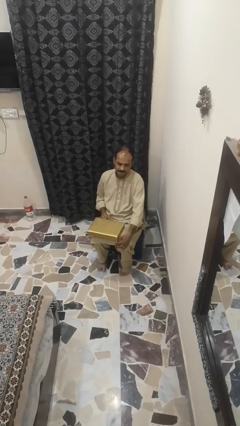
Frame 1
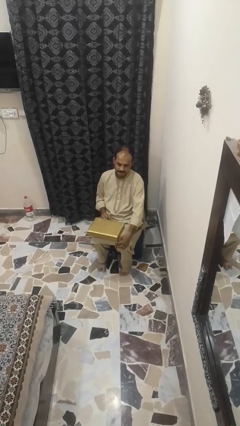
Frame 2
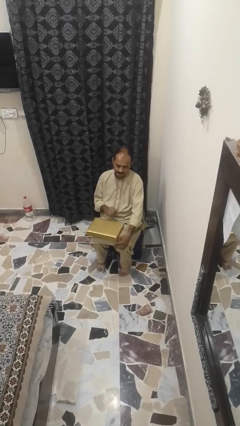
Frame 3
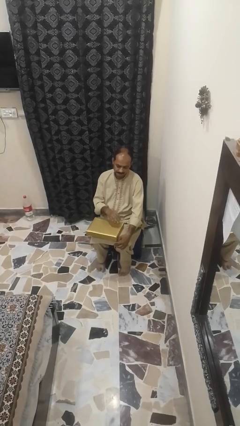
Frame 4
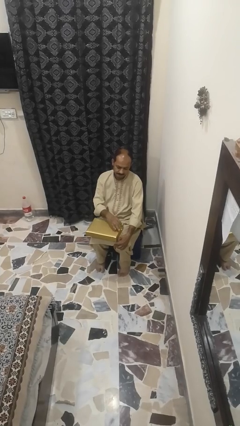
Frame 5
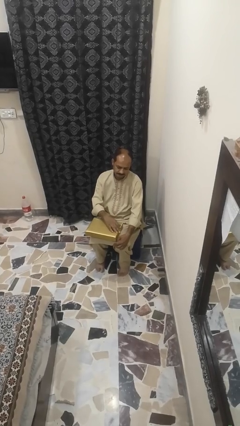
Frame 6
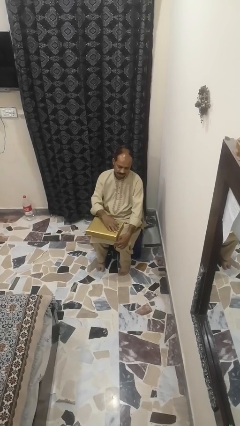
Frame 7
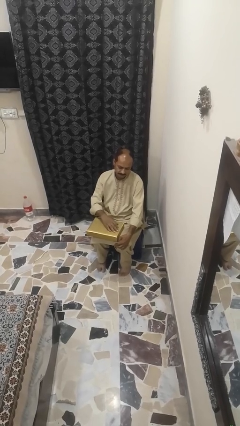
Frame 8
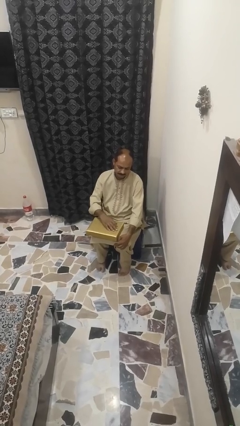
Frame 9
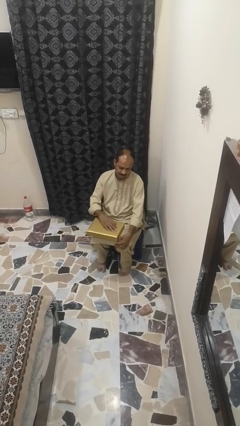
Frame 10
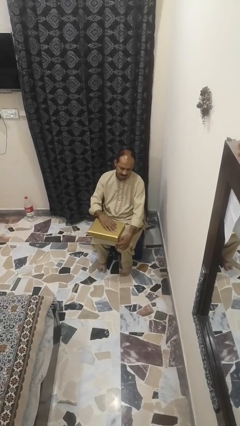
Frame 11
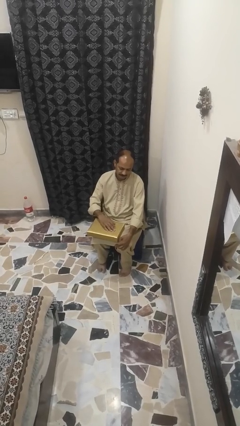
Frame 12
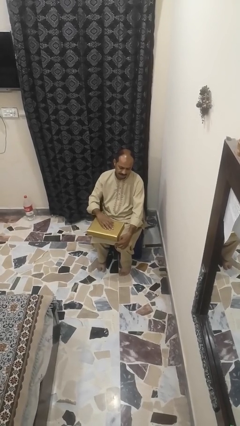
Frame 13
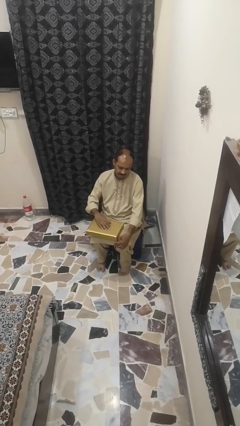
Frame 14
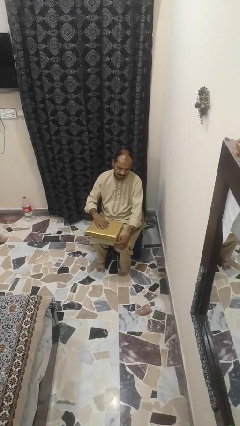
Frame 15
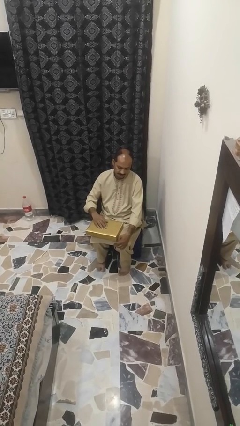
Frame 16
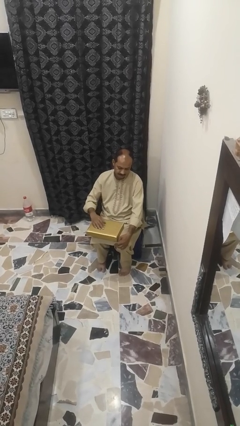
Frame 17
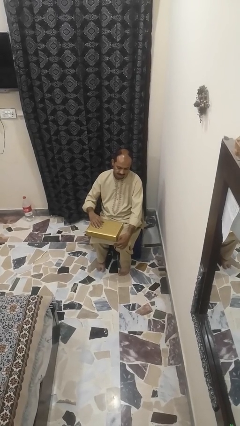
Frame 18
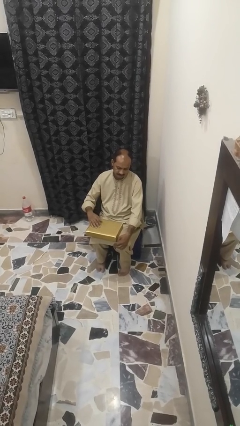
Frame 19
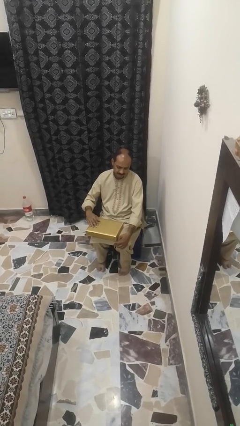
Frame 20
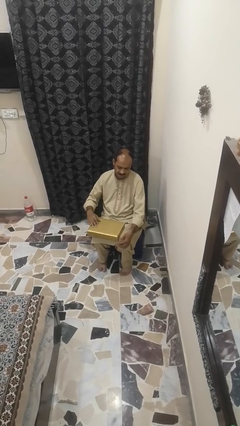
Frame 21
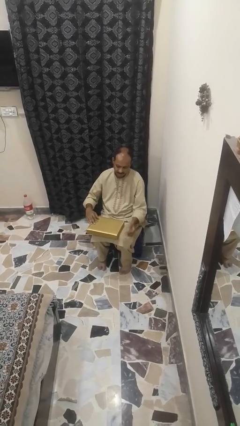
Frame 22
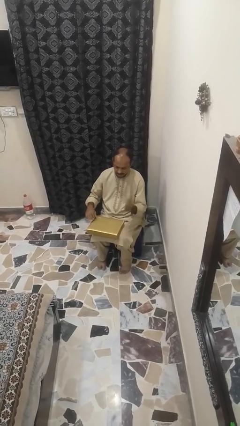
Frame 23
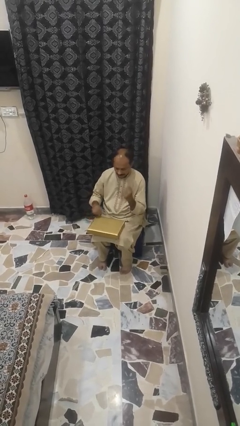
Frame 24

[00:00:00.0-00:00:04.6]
person waves hand over object

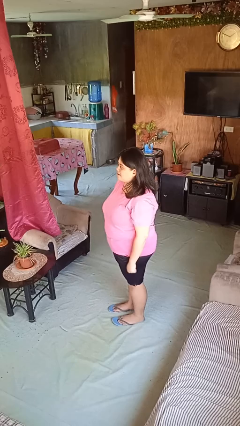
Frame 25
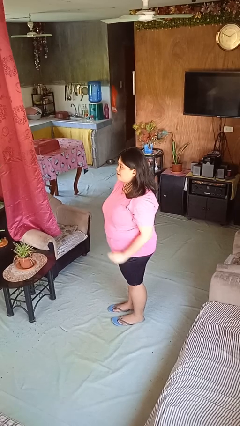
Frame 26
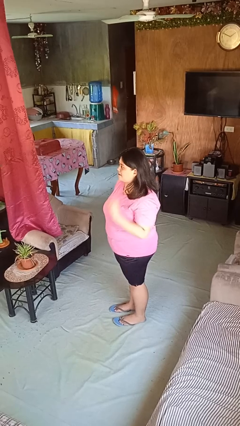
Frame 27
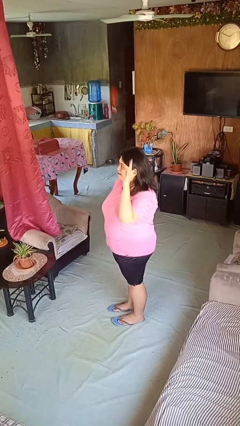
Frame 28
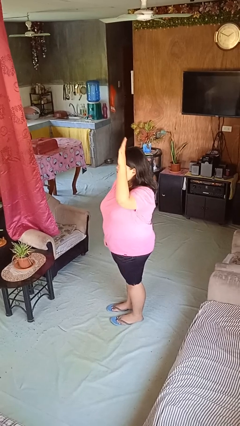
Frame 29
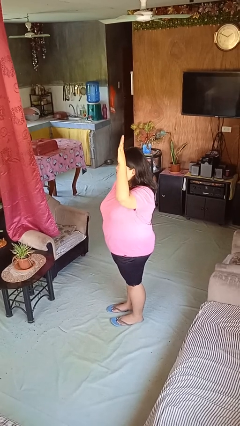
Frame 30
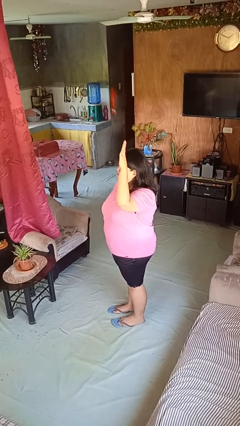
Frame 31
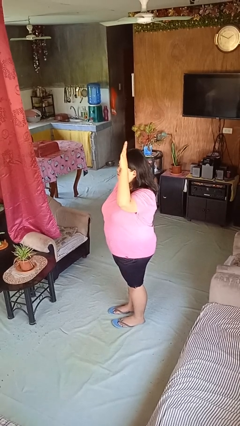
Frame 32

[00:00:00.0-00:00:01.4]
person gestures raise hand

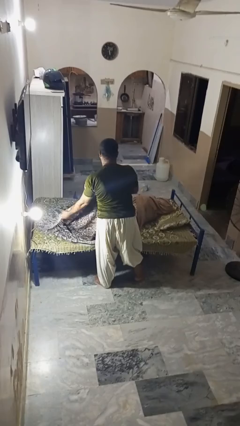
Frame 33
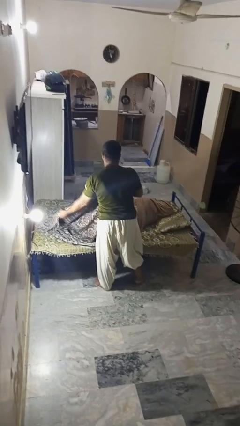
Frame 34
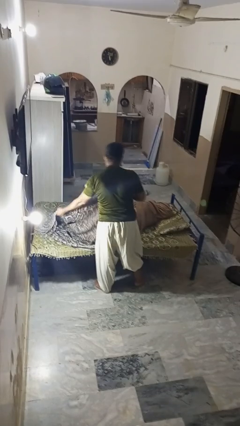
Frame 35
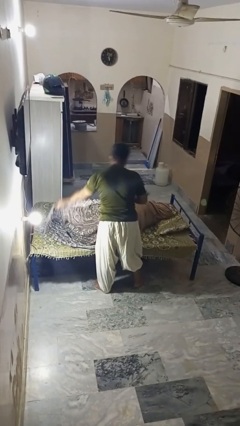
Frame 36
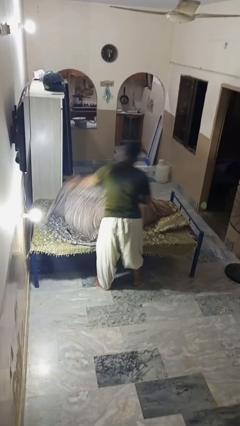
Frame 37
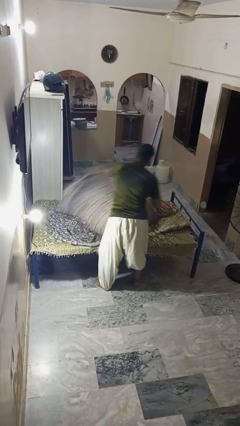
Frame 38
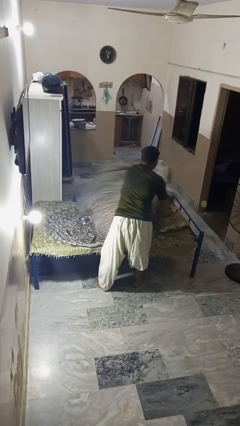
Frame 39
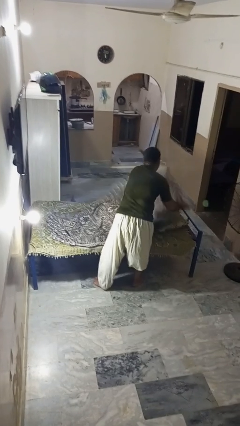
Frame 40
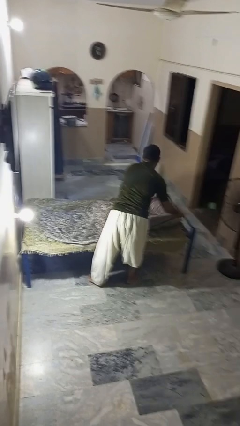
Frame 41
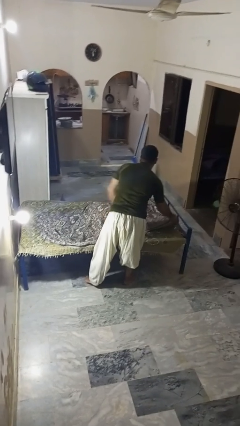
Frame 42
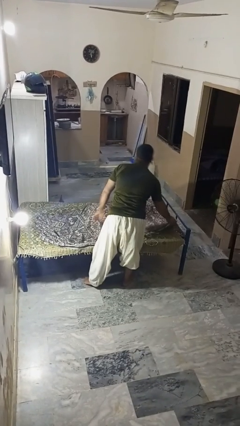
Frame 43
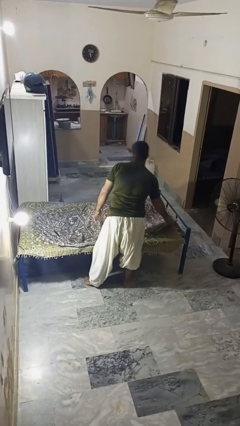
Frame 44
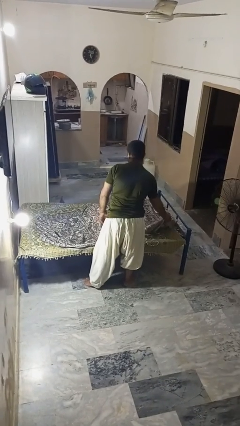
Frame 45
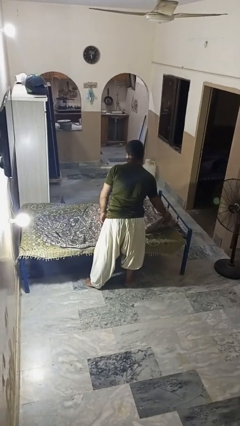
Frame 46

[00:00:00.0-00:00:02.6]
person covers friend with blanket

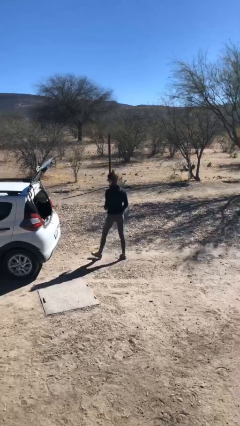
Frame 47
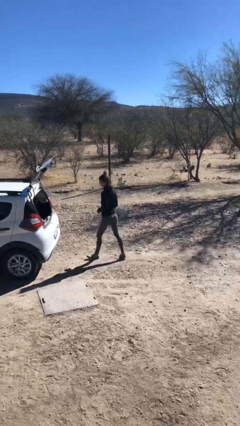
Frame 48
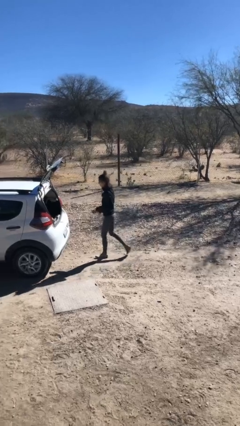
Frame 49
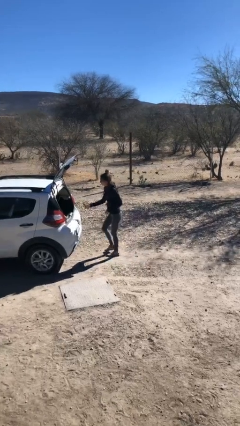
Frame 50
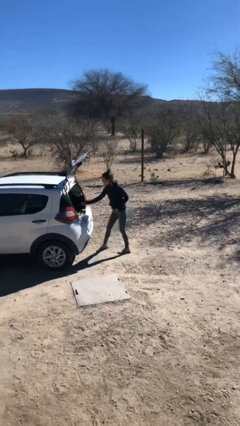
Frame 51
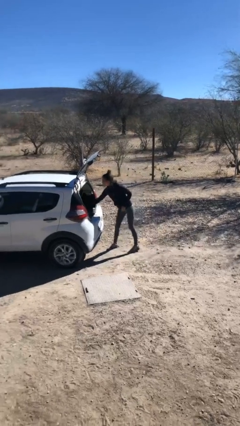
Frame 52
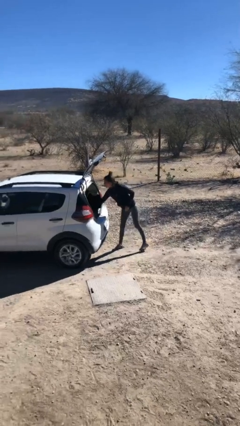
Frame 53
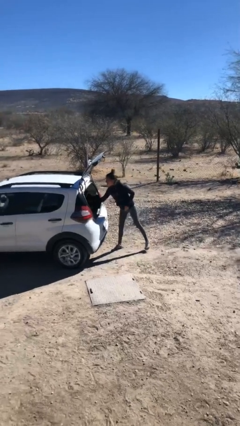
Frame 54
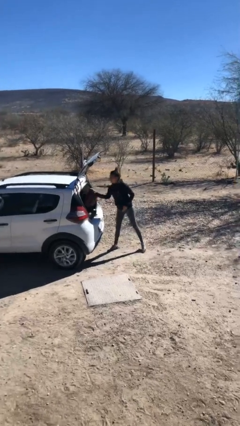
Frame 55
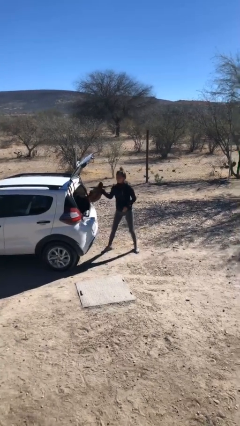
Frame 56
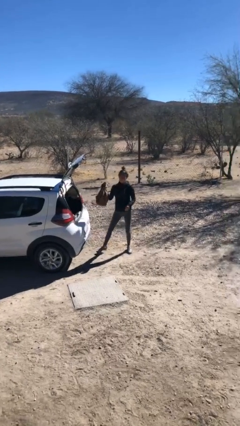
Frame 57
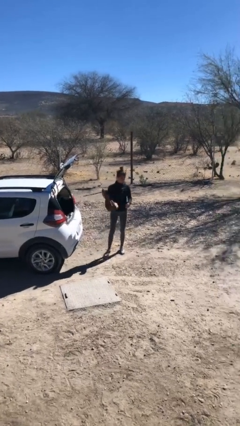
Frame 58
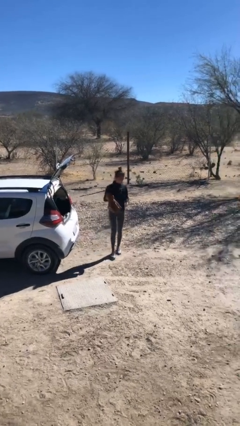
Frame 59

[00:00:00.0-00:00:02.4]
person unloads car

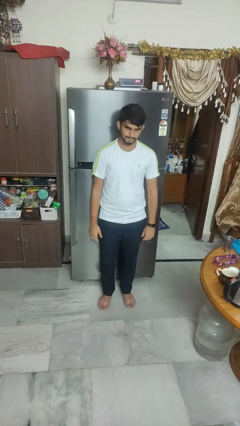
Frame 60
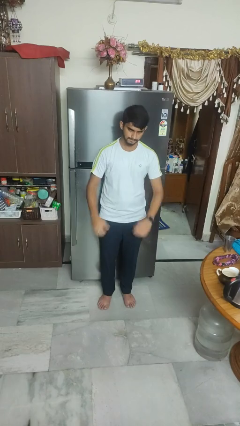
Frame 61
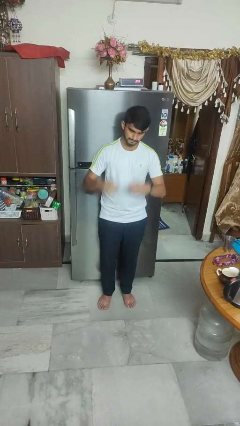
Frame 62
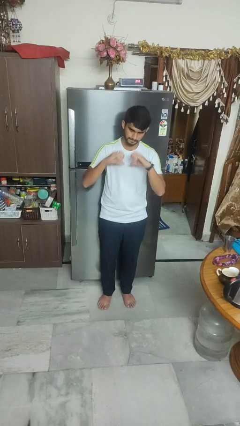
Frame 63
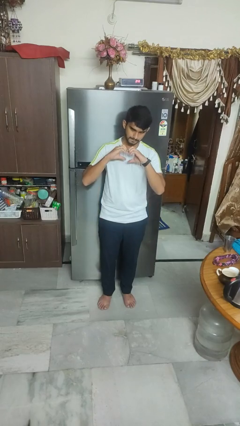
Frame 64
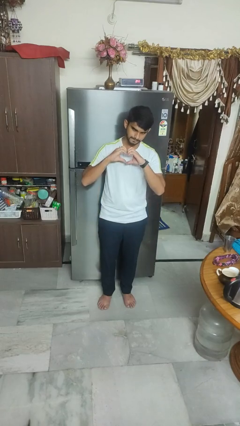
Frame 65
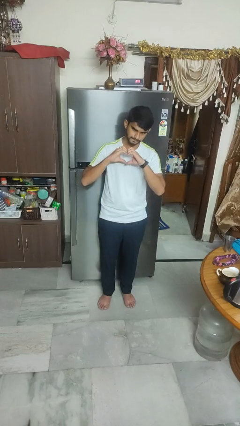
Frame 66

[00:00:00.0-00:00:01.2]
person gestures heart

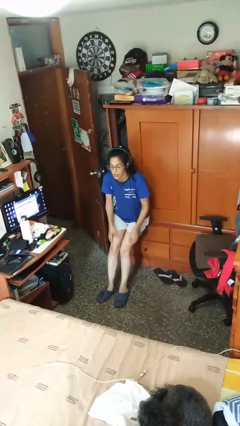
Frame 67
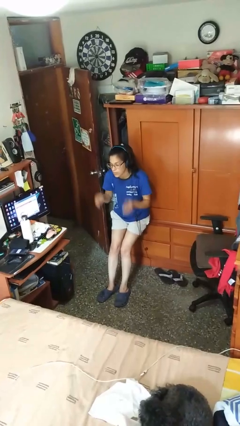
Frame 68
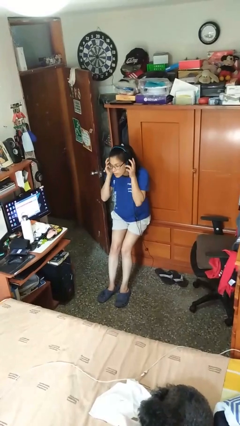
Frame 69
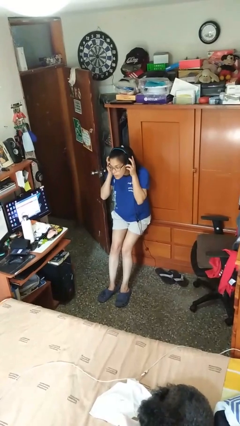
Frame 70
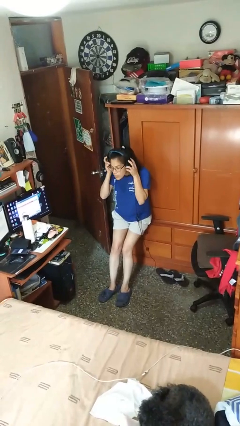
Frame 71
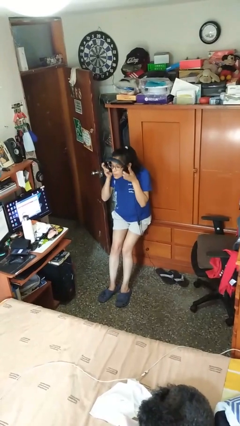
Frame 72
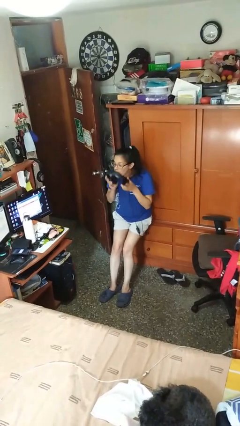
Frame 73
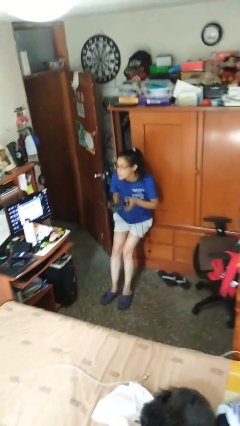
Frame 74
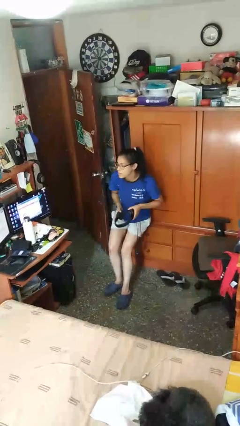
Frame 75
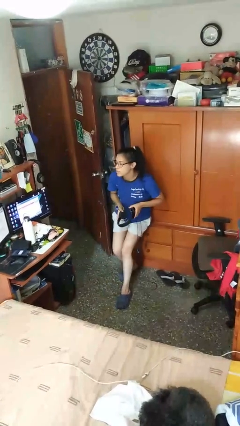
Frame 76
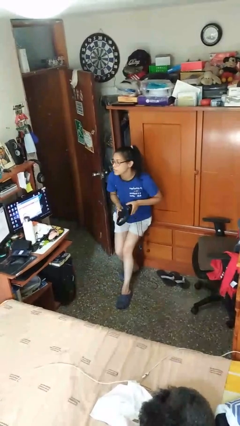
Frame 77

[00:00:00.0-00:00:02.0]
person puts on headphones

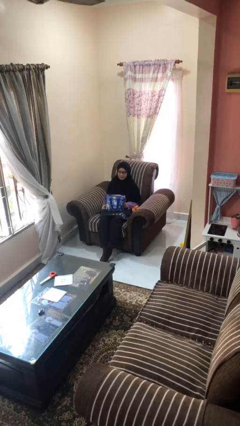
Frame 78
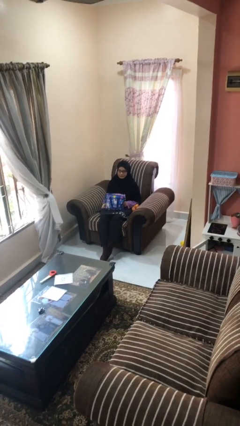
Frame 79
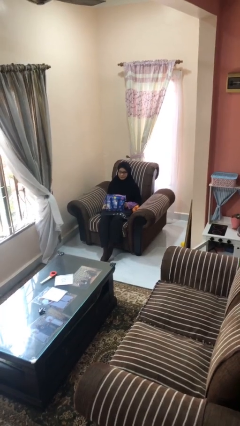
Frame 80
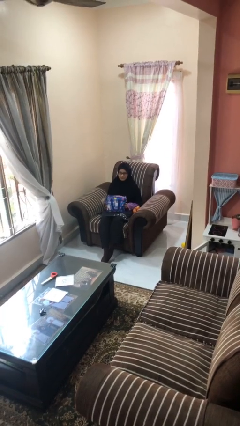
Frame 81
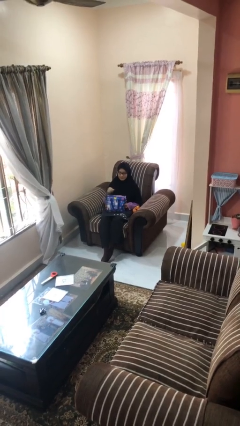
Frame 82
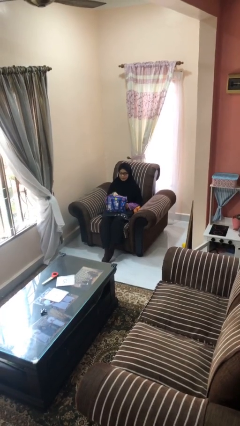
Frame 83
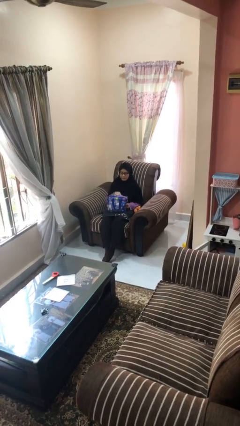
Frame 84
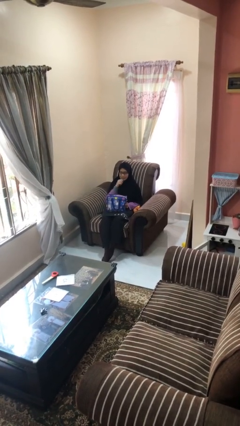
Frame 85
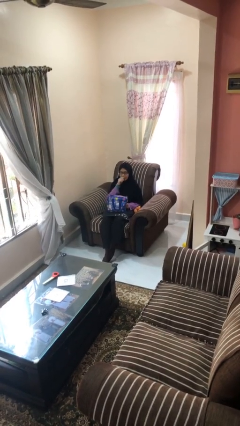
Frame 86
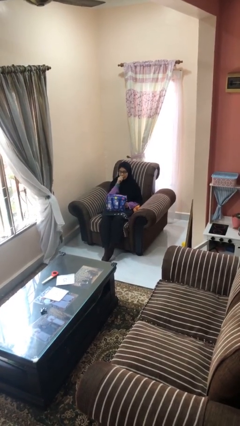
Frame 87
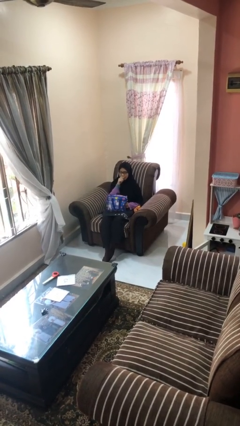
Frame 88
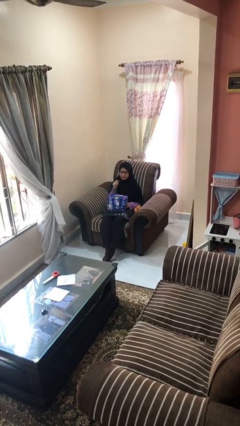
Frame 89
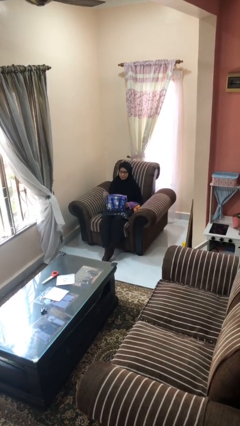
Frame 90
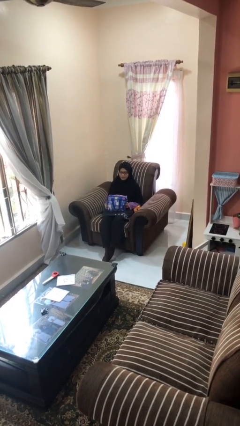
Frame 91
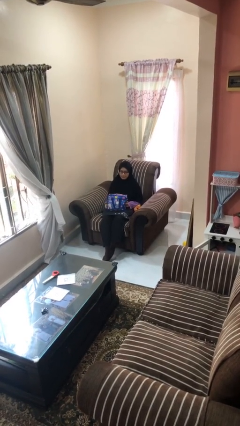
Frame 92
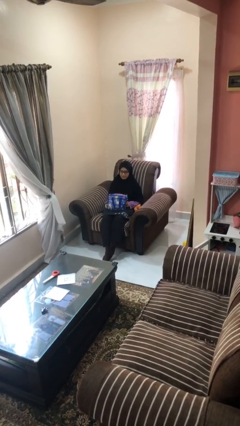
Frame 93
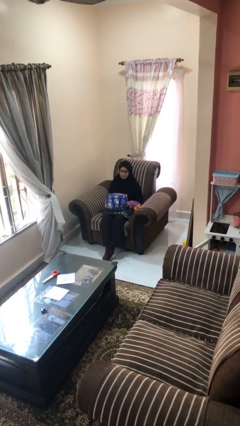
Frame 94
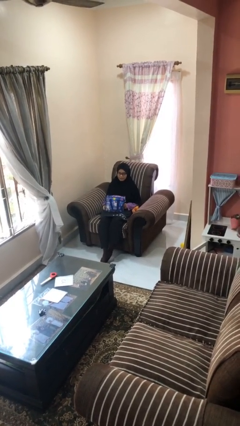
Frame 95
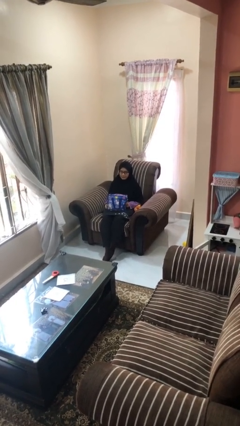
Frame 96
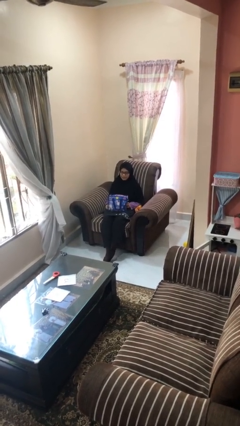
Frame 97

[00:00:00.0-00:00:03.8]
person eats snack from bag
